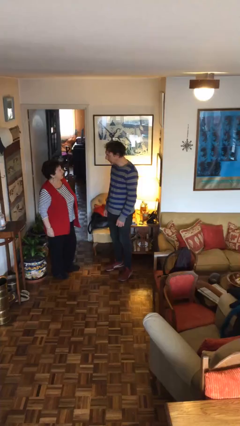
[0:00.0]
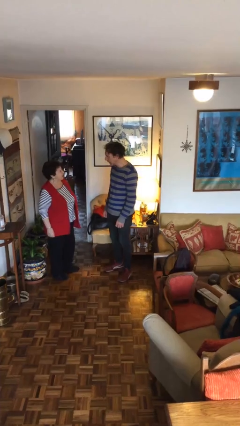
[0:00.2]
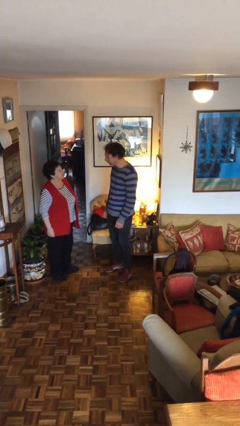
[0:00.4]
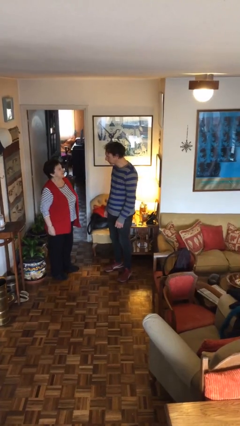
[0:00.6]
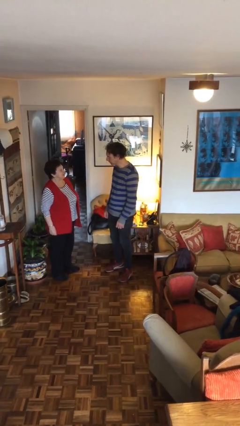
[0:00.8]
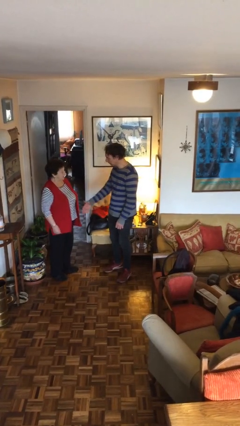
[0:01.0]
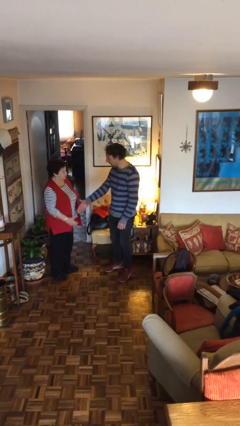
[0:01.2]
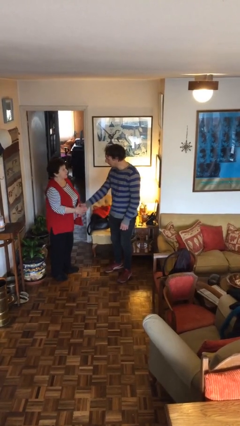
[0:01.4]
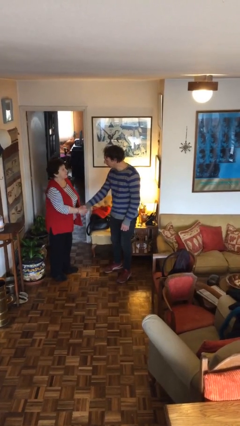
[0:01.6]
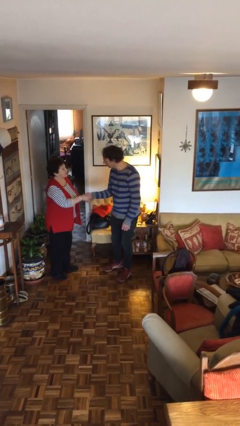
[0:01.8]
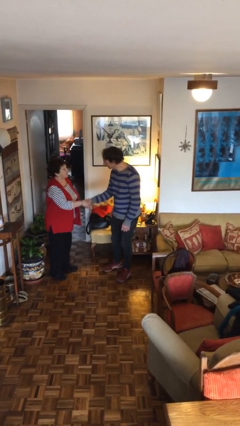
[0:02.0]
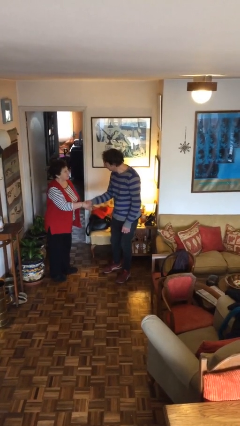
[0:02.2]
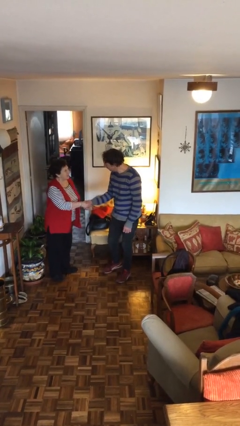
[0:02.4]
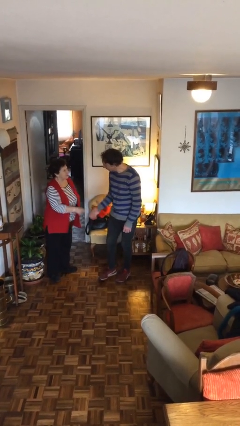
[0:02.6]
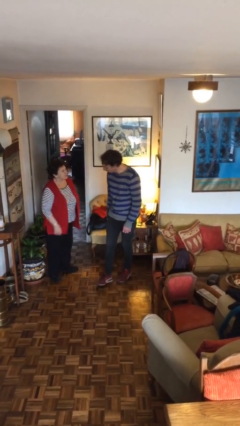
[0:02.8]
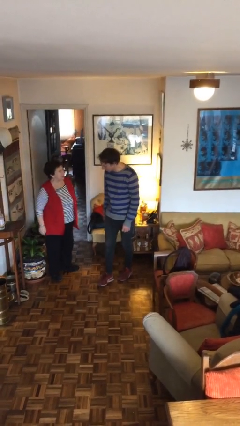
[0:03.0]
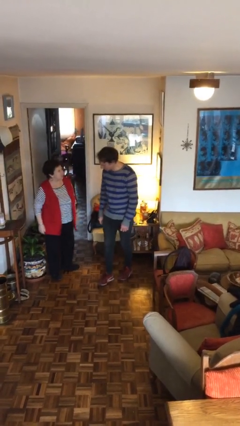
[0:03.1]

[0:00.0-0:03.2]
person shakes hand

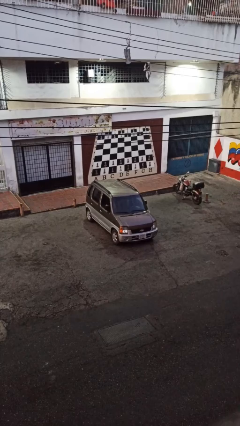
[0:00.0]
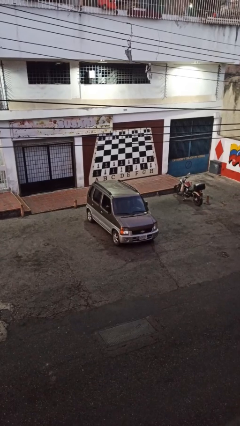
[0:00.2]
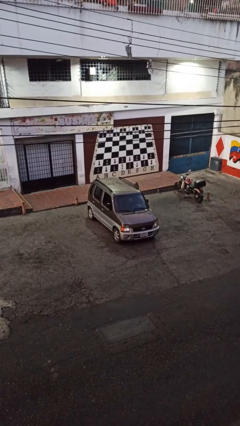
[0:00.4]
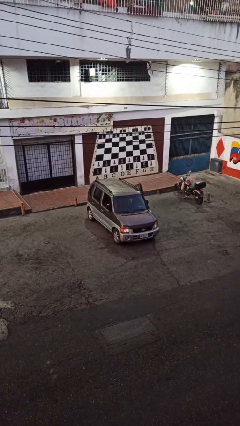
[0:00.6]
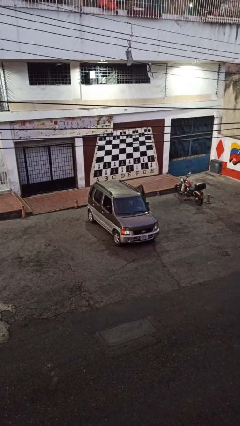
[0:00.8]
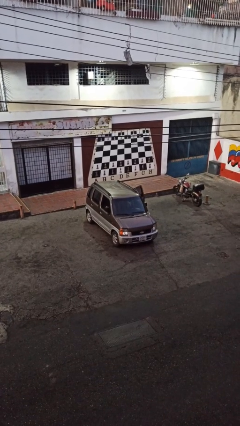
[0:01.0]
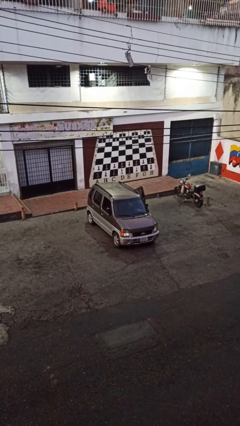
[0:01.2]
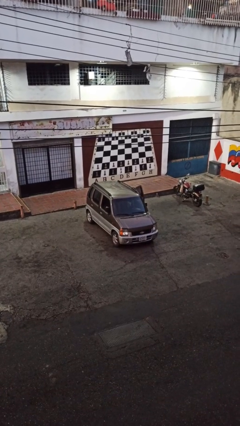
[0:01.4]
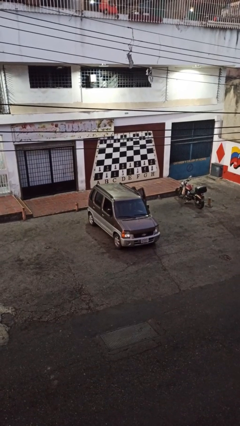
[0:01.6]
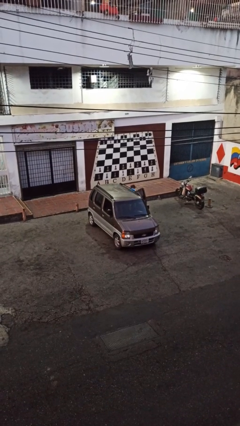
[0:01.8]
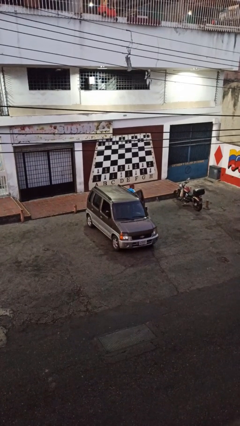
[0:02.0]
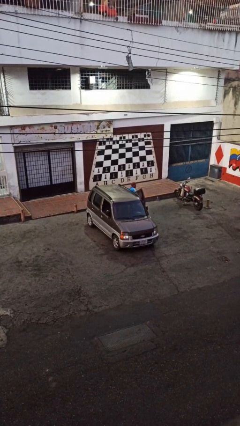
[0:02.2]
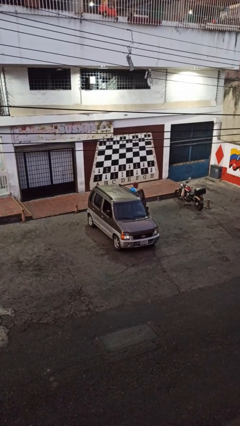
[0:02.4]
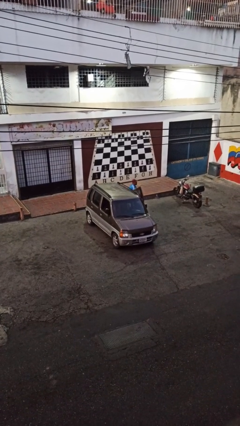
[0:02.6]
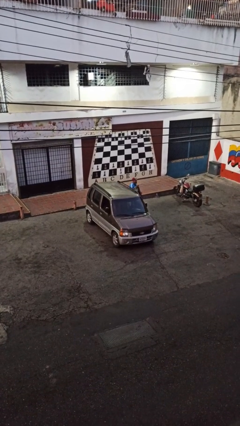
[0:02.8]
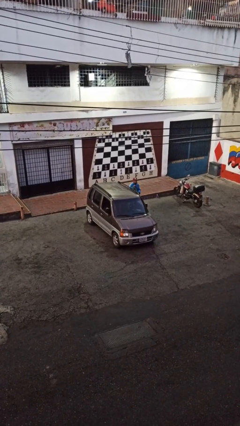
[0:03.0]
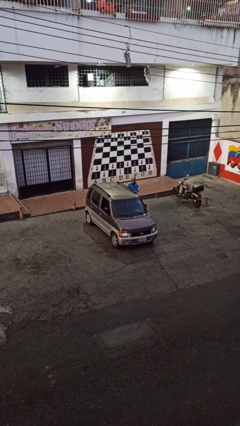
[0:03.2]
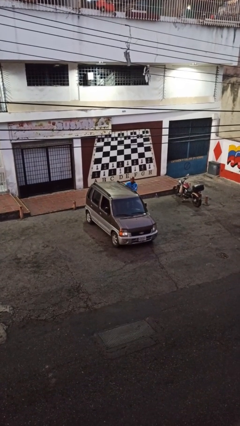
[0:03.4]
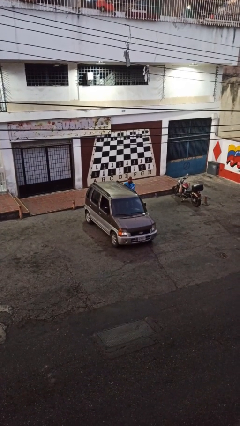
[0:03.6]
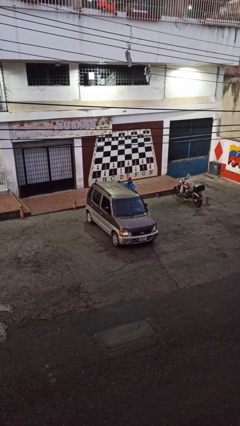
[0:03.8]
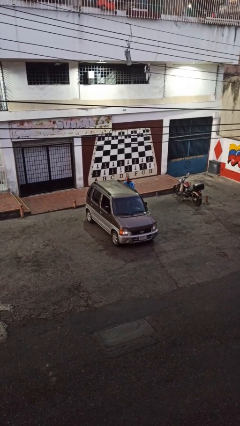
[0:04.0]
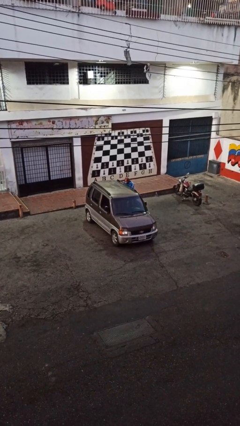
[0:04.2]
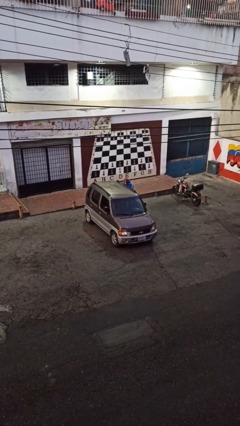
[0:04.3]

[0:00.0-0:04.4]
car drops off person

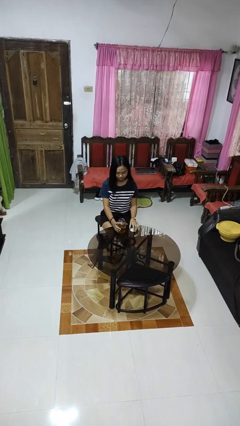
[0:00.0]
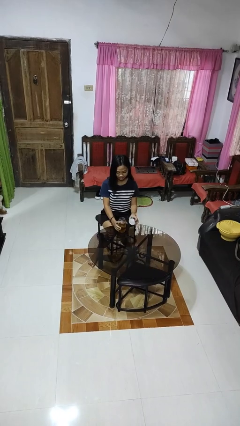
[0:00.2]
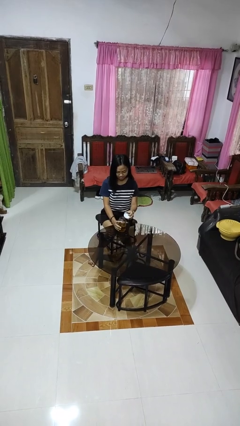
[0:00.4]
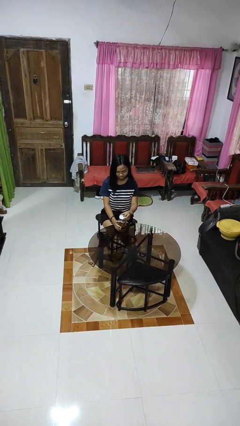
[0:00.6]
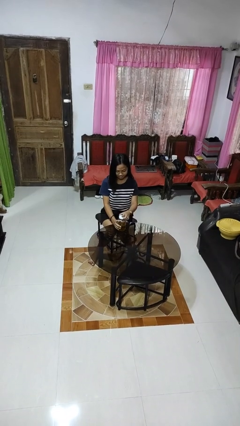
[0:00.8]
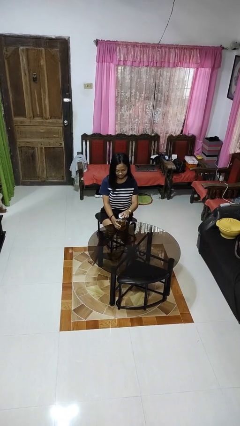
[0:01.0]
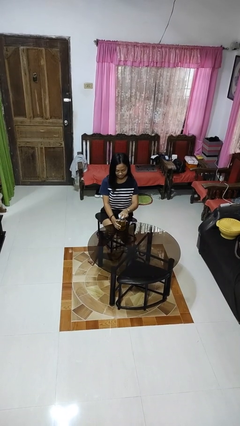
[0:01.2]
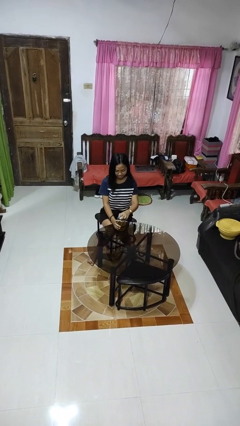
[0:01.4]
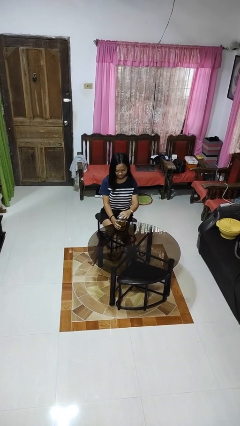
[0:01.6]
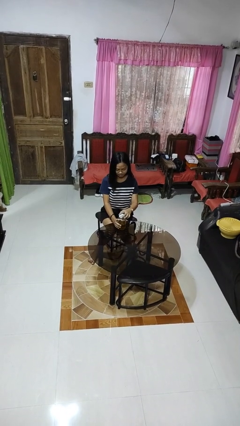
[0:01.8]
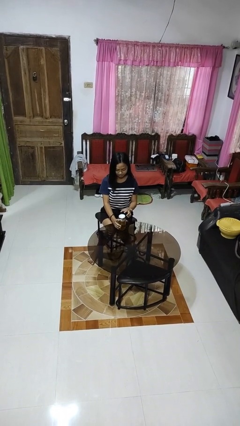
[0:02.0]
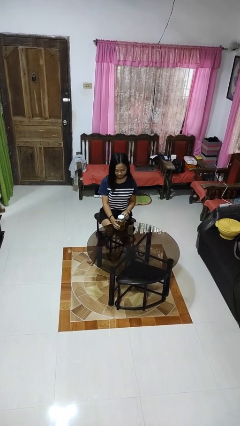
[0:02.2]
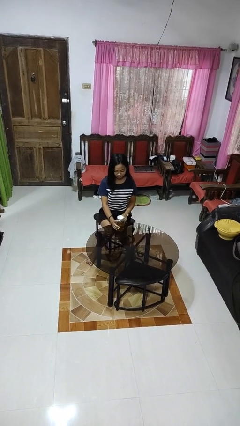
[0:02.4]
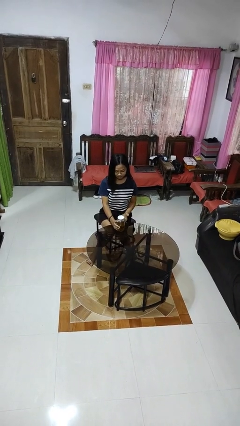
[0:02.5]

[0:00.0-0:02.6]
person closes jar

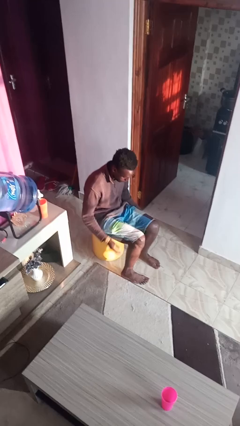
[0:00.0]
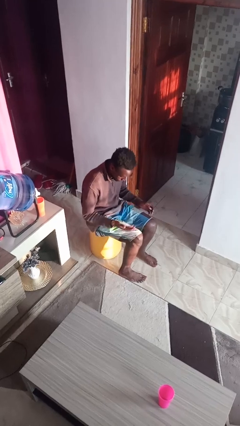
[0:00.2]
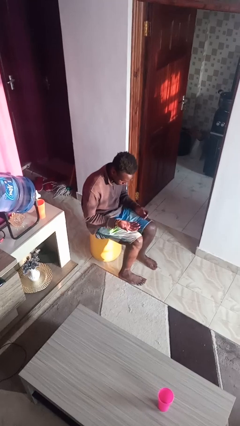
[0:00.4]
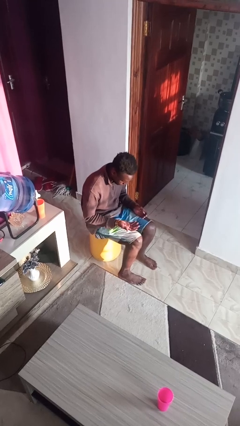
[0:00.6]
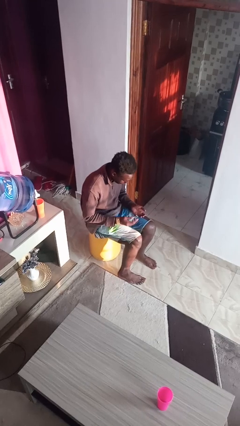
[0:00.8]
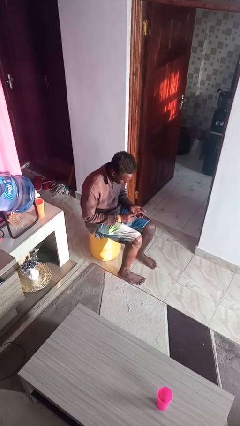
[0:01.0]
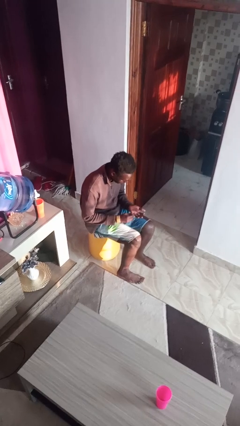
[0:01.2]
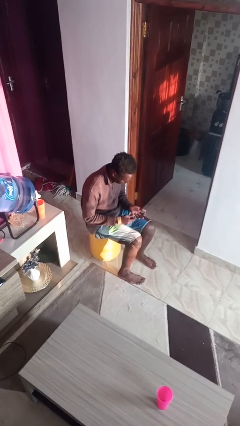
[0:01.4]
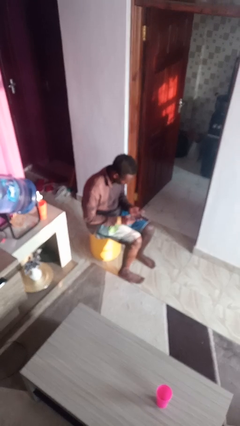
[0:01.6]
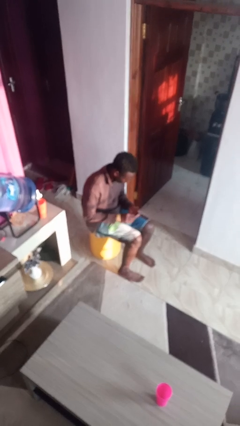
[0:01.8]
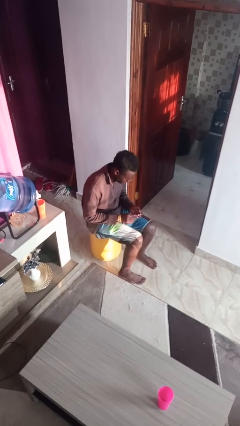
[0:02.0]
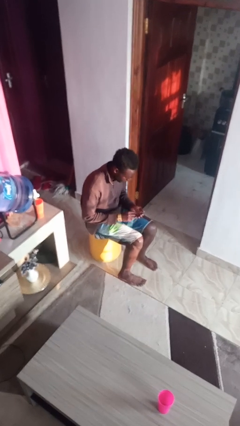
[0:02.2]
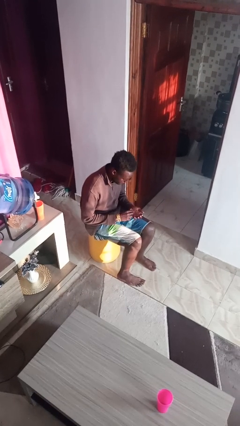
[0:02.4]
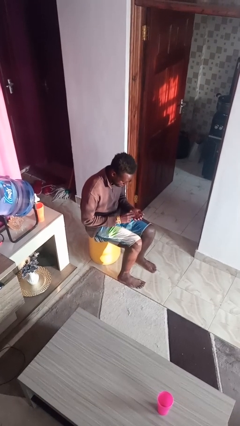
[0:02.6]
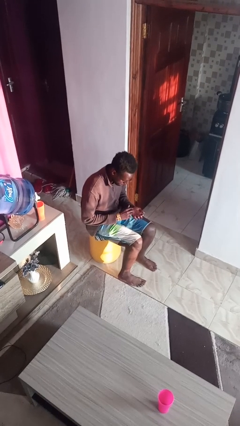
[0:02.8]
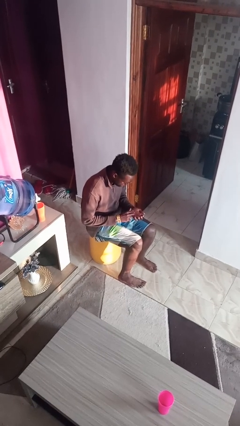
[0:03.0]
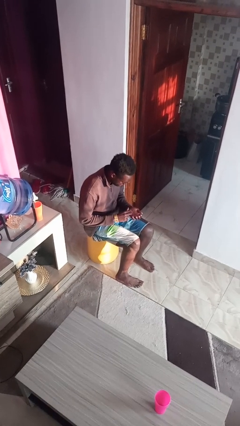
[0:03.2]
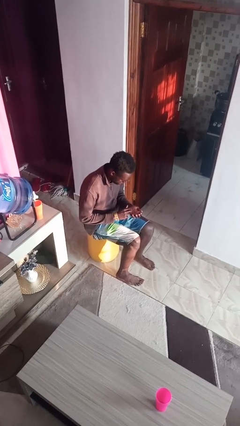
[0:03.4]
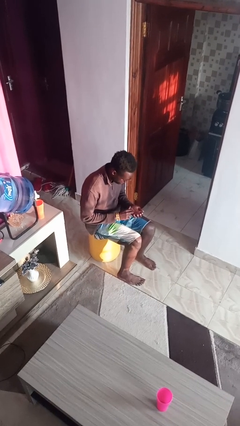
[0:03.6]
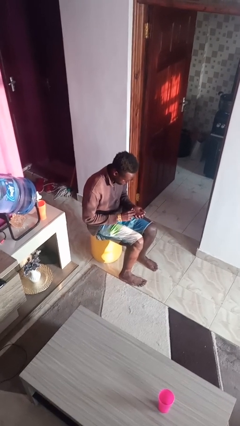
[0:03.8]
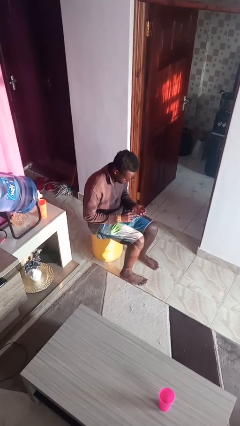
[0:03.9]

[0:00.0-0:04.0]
person looks at hands in lap

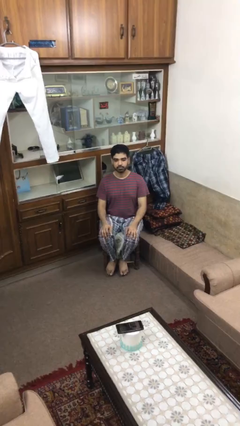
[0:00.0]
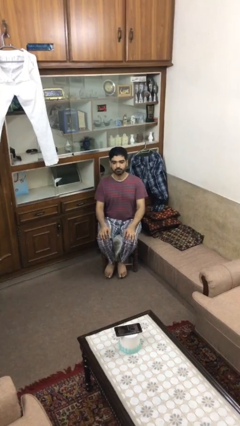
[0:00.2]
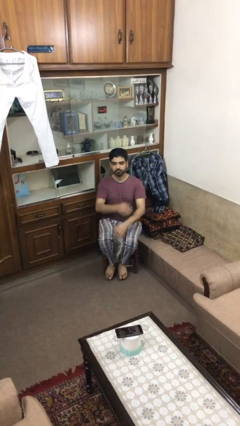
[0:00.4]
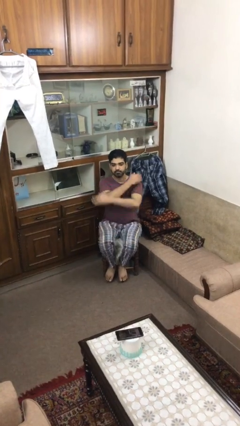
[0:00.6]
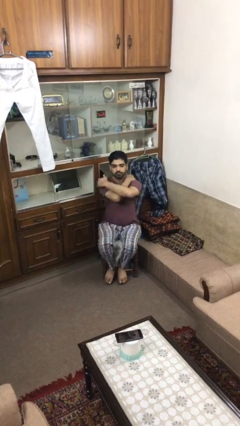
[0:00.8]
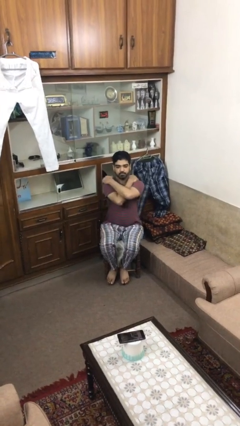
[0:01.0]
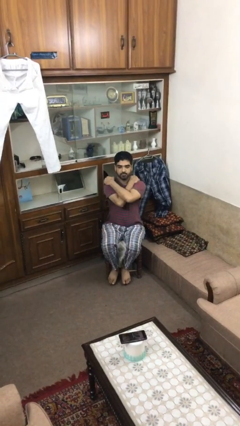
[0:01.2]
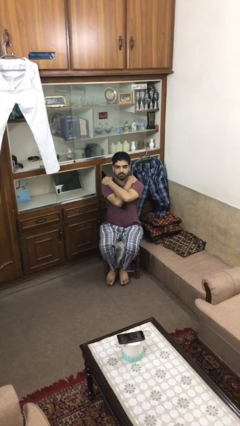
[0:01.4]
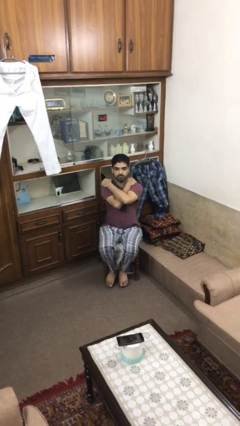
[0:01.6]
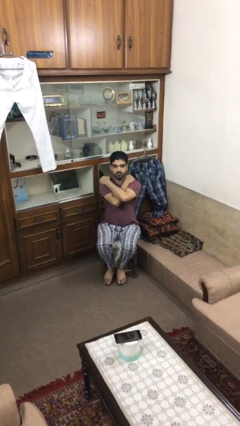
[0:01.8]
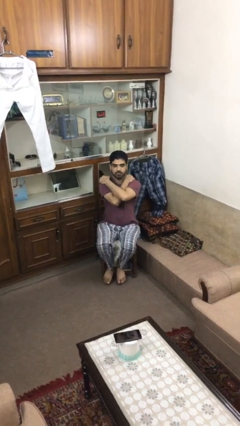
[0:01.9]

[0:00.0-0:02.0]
person crosses arms

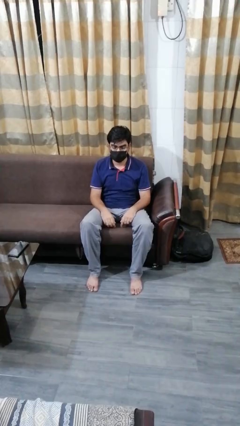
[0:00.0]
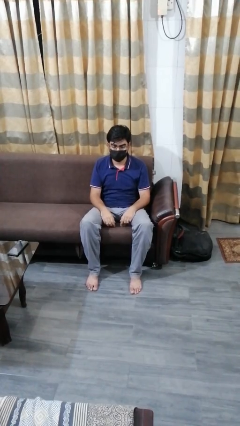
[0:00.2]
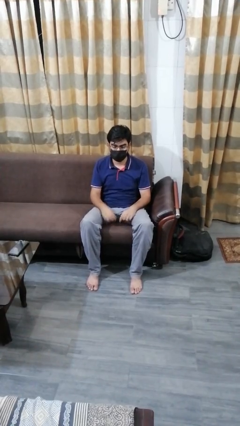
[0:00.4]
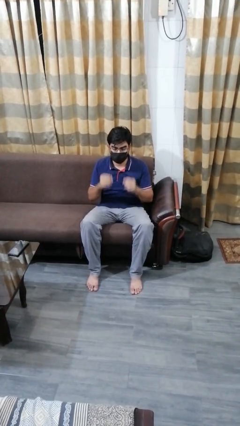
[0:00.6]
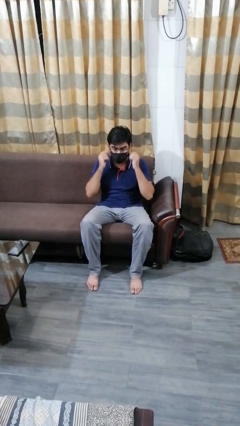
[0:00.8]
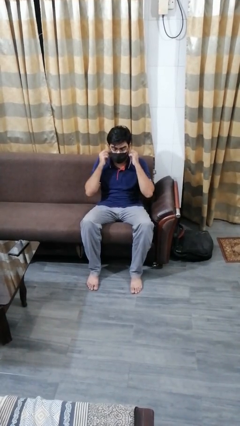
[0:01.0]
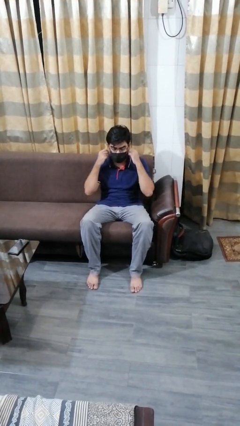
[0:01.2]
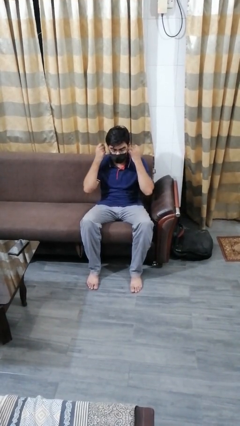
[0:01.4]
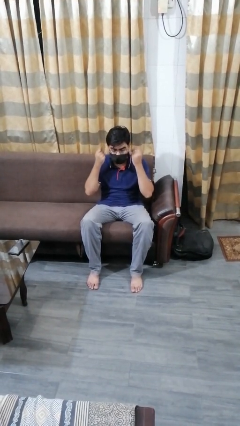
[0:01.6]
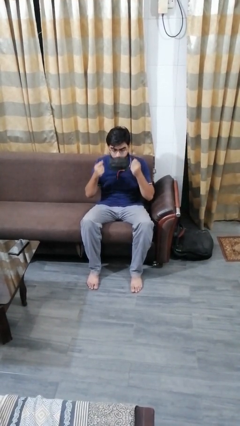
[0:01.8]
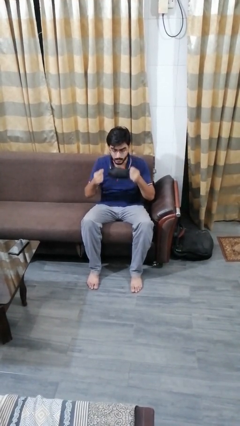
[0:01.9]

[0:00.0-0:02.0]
person takes off facemask
